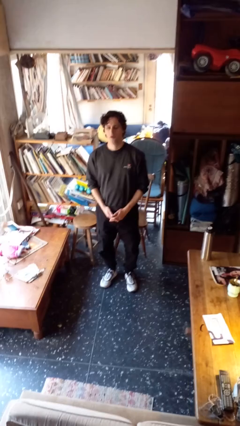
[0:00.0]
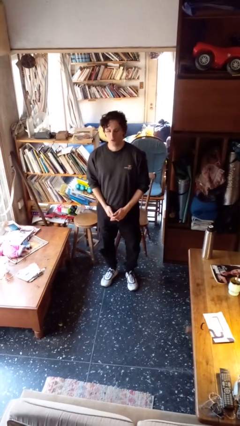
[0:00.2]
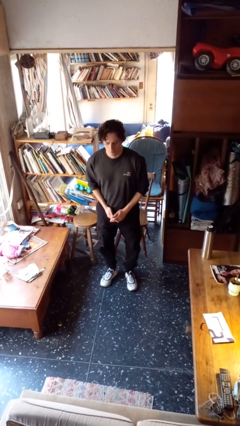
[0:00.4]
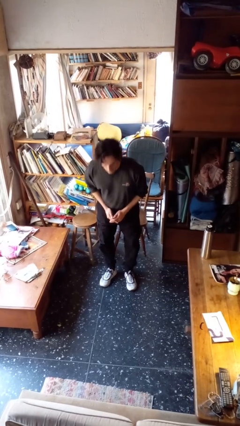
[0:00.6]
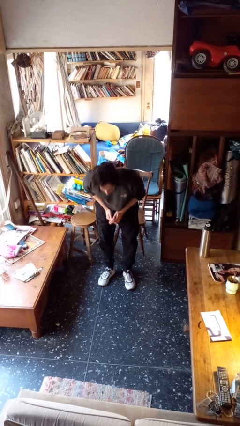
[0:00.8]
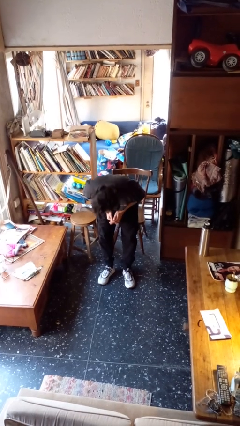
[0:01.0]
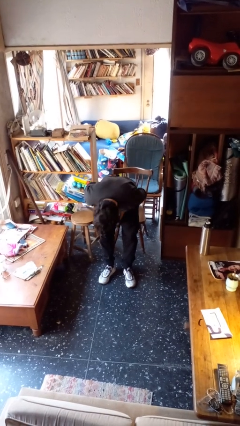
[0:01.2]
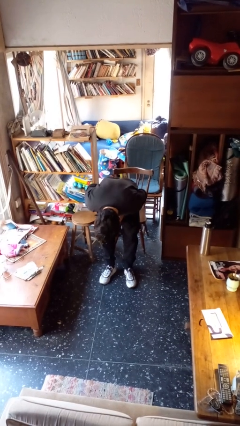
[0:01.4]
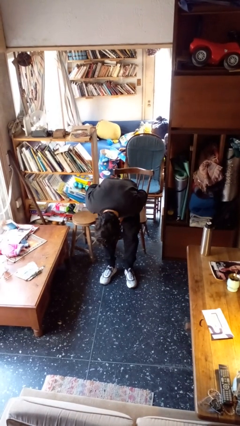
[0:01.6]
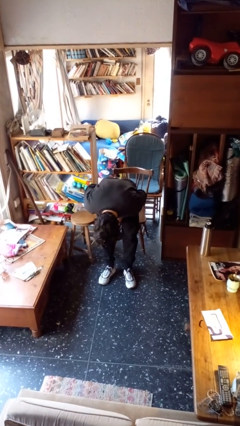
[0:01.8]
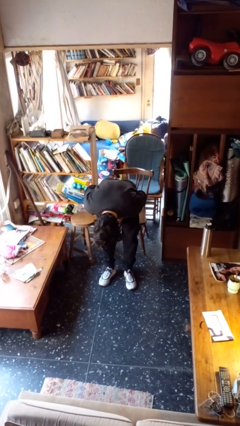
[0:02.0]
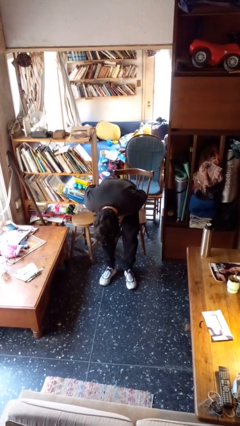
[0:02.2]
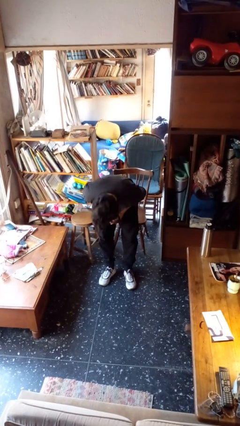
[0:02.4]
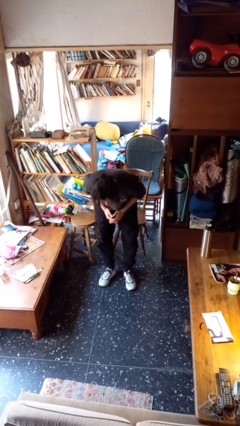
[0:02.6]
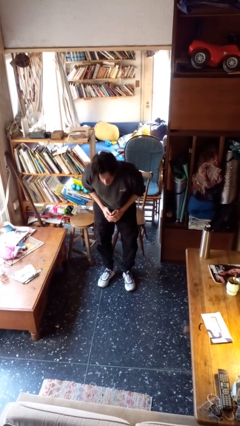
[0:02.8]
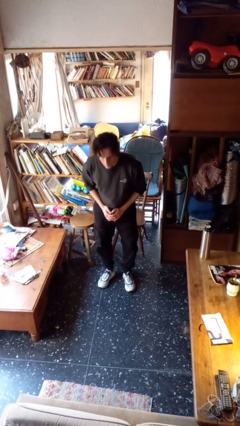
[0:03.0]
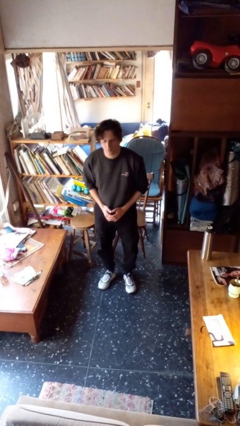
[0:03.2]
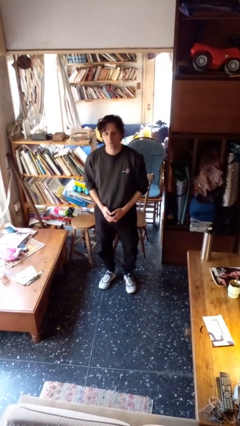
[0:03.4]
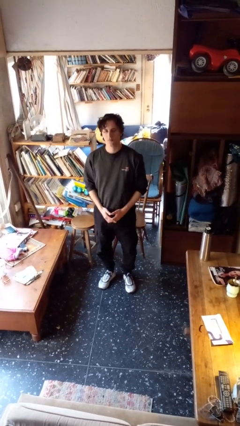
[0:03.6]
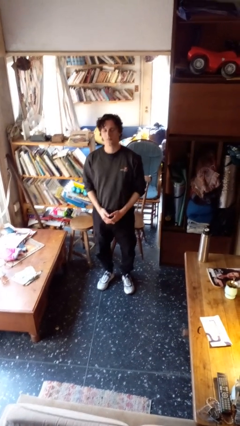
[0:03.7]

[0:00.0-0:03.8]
person bows

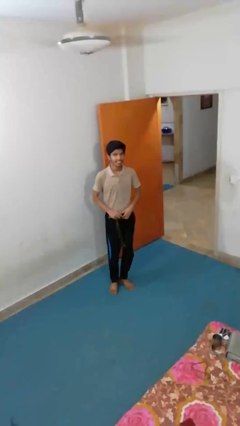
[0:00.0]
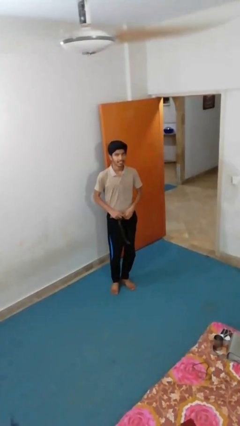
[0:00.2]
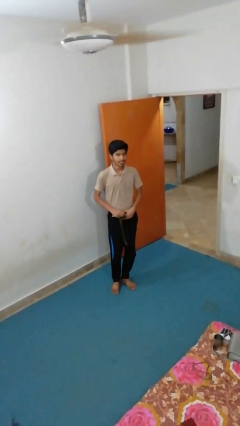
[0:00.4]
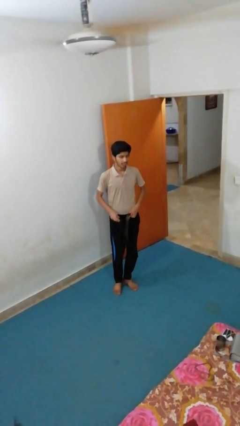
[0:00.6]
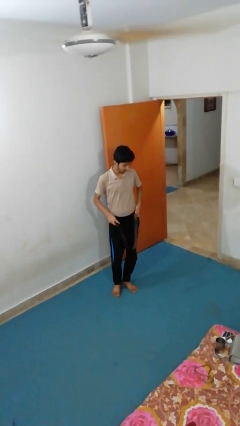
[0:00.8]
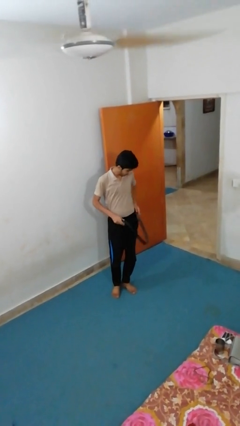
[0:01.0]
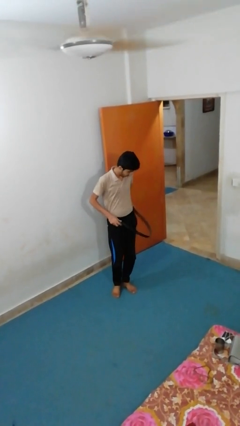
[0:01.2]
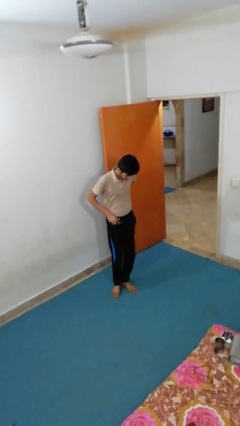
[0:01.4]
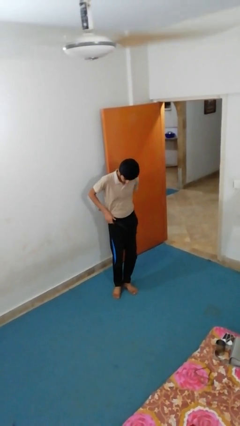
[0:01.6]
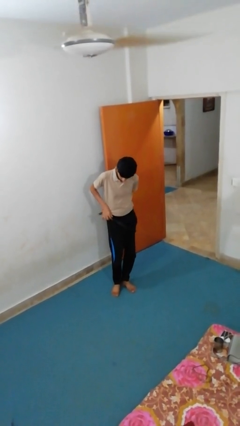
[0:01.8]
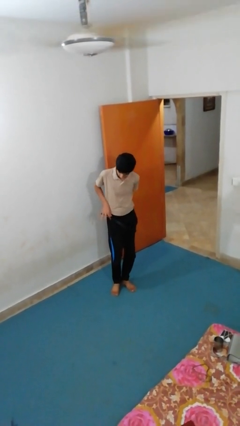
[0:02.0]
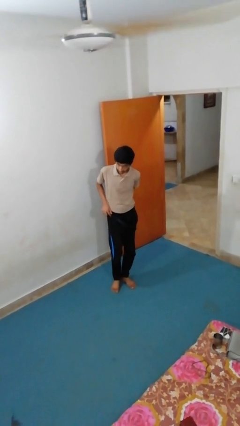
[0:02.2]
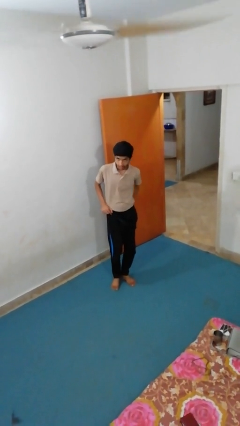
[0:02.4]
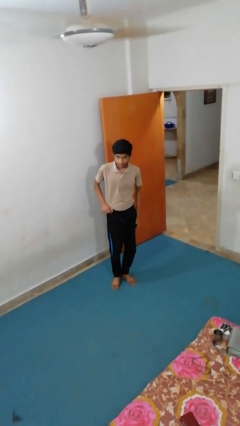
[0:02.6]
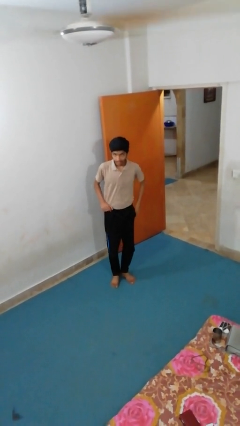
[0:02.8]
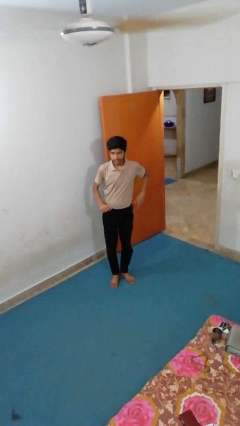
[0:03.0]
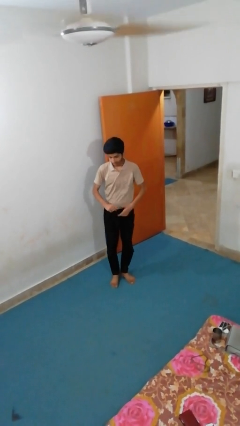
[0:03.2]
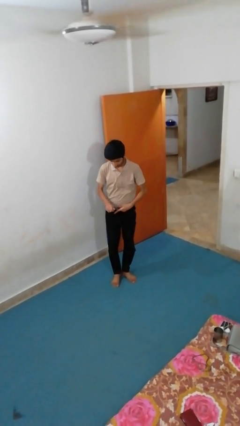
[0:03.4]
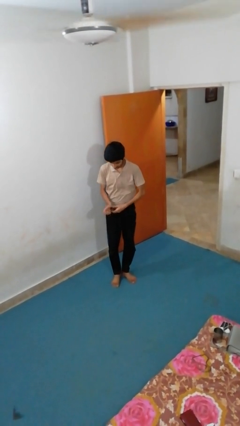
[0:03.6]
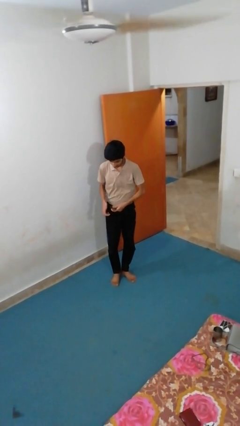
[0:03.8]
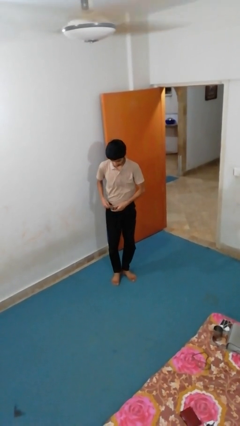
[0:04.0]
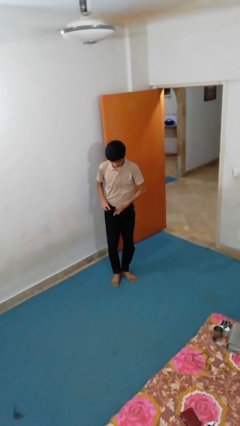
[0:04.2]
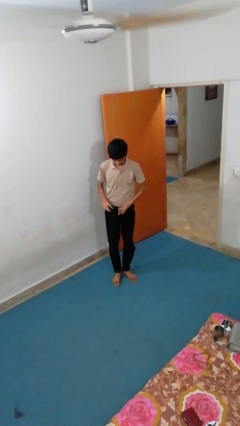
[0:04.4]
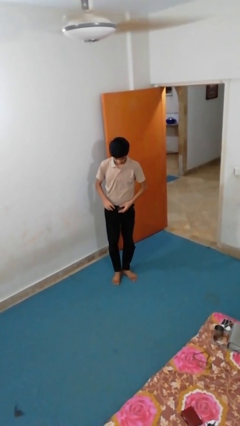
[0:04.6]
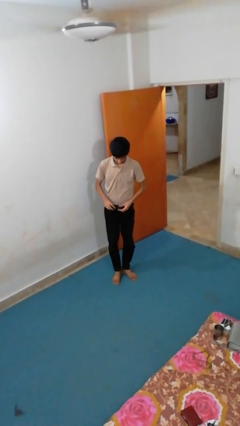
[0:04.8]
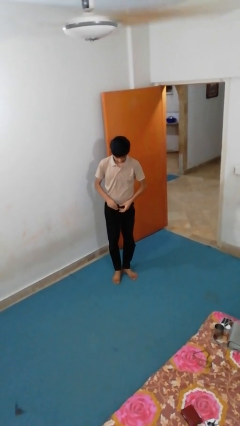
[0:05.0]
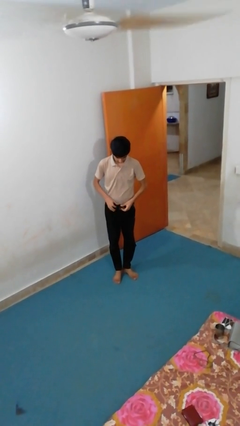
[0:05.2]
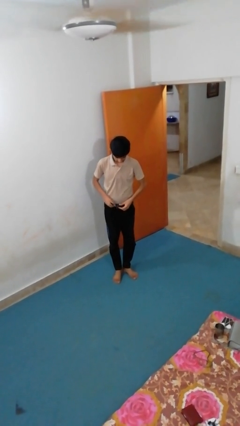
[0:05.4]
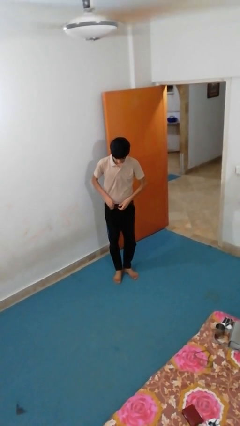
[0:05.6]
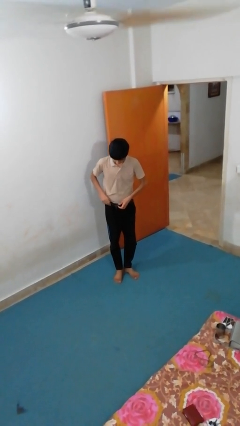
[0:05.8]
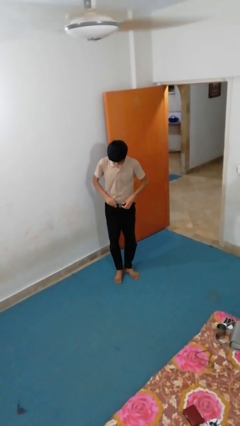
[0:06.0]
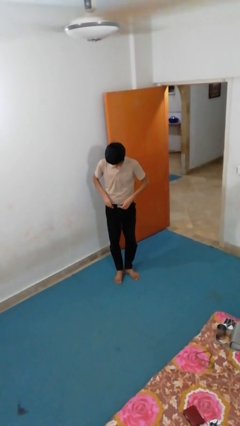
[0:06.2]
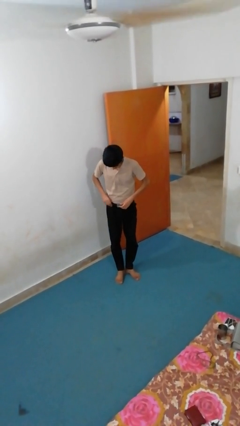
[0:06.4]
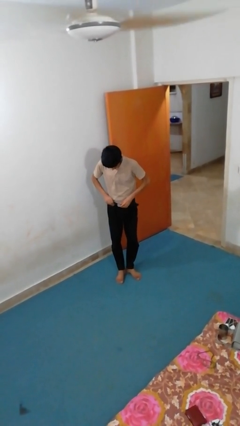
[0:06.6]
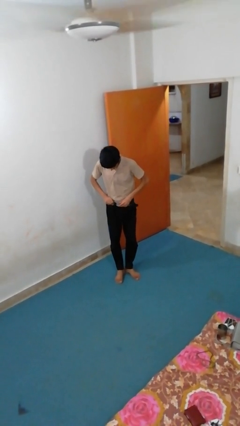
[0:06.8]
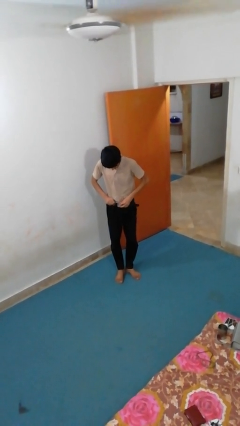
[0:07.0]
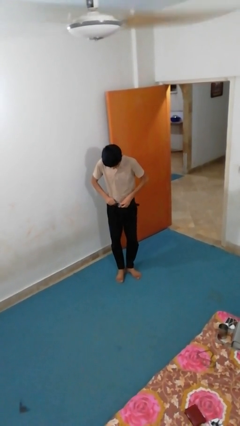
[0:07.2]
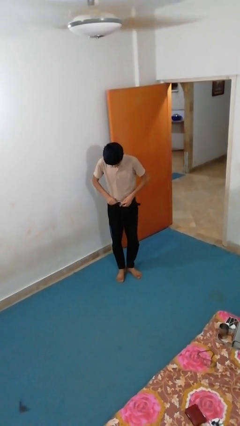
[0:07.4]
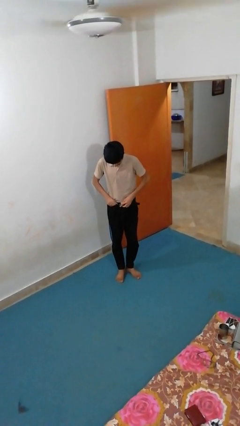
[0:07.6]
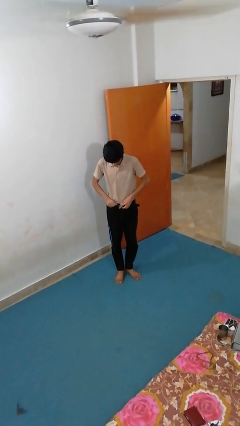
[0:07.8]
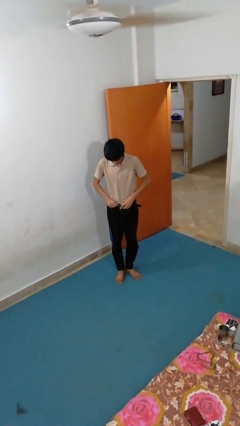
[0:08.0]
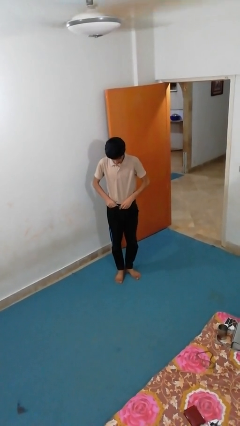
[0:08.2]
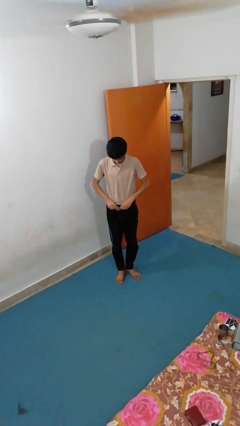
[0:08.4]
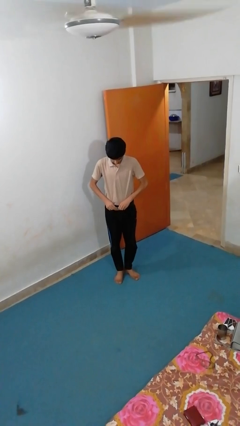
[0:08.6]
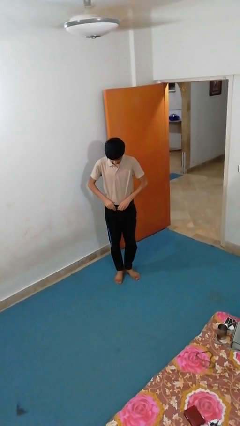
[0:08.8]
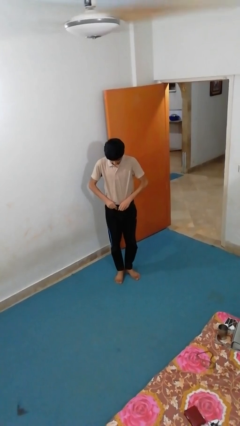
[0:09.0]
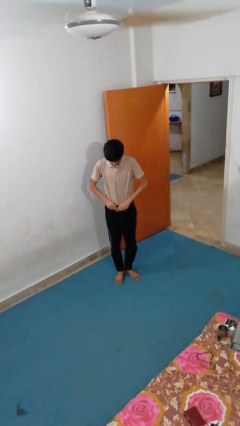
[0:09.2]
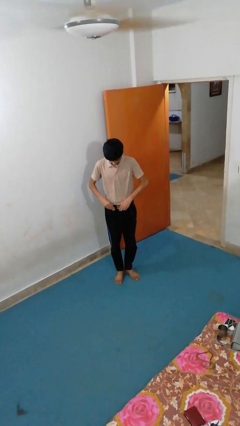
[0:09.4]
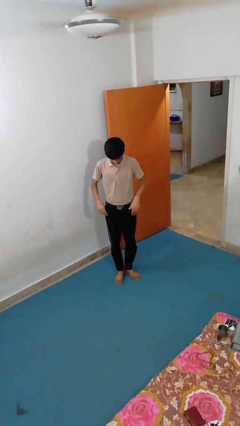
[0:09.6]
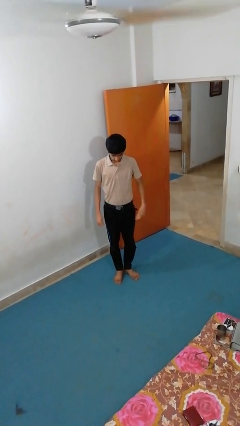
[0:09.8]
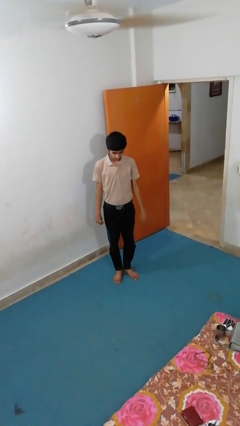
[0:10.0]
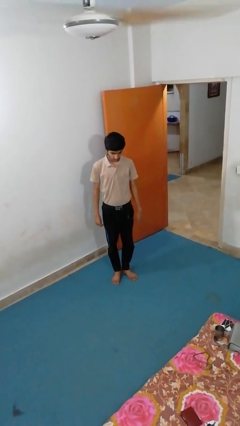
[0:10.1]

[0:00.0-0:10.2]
person puts on belt

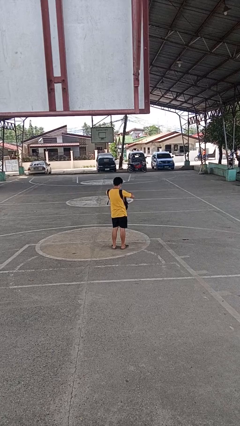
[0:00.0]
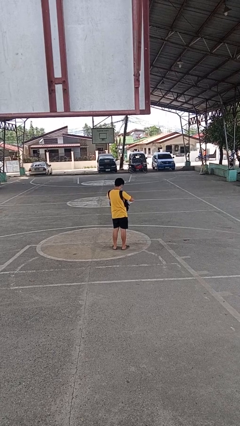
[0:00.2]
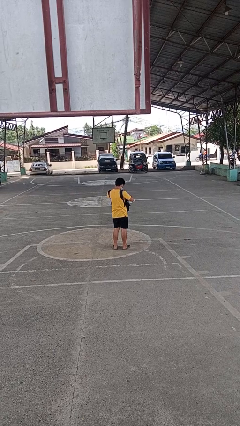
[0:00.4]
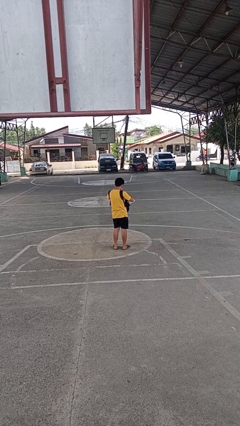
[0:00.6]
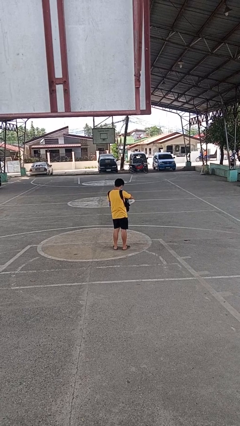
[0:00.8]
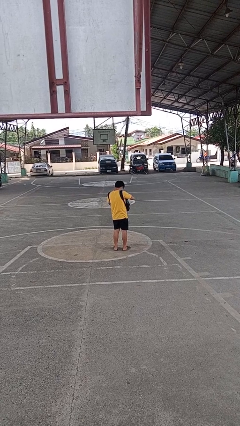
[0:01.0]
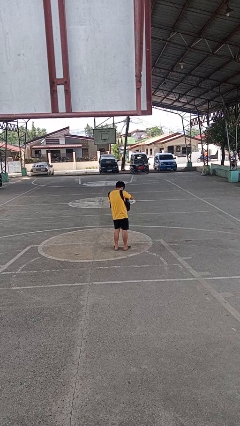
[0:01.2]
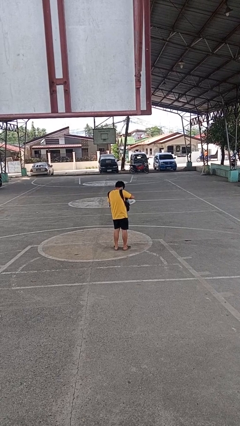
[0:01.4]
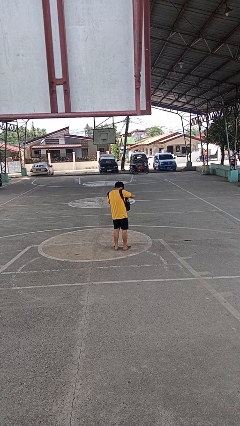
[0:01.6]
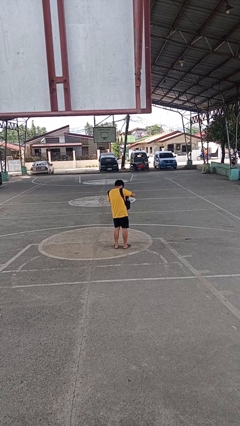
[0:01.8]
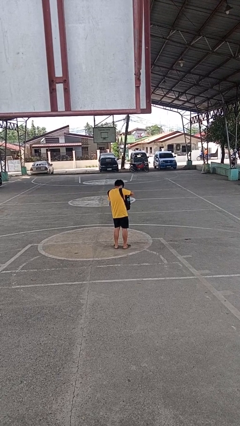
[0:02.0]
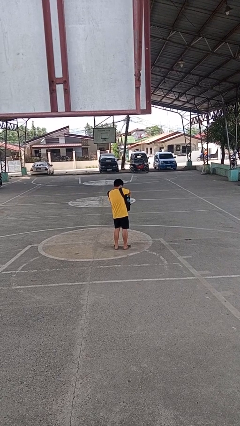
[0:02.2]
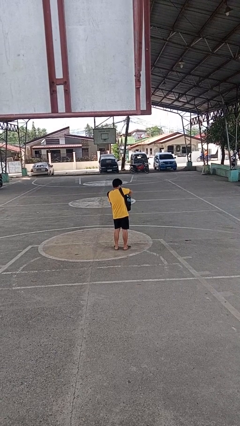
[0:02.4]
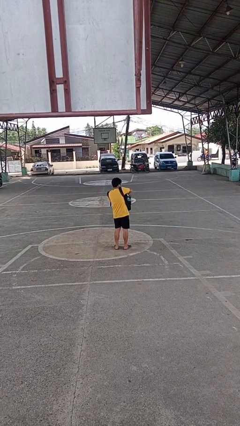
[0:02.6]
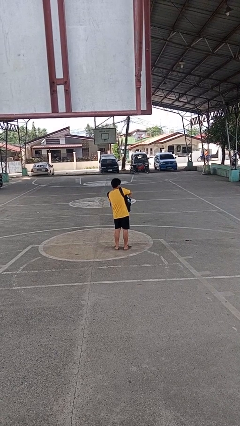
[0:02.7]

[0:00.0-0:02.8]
person searches in backpack

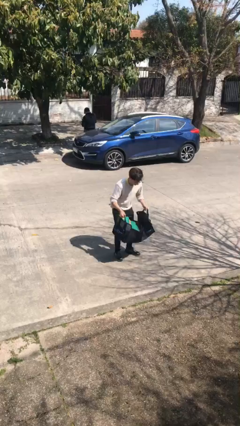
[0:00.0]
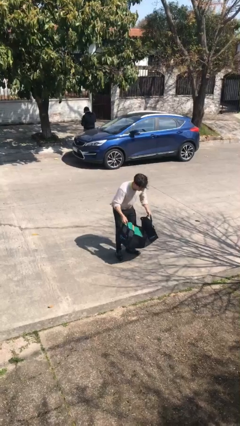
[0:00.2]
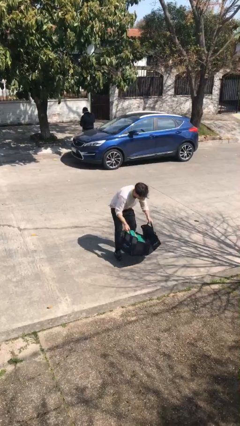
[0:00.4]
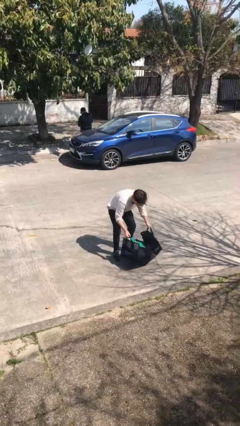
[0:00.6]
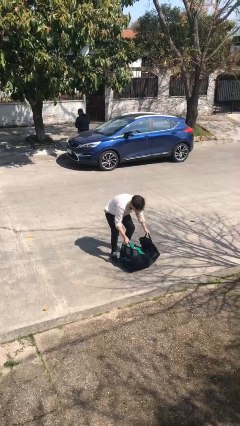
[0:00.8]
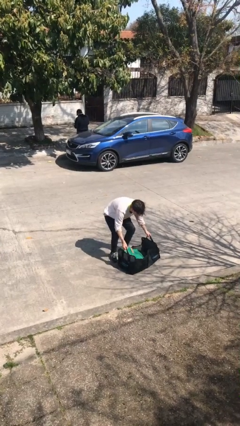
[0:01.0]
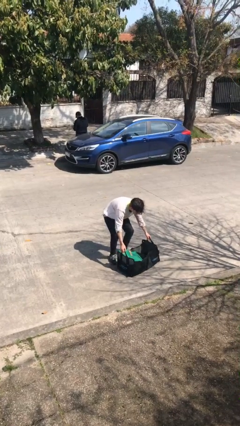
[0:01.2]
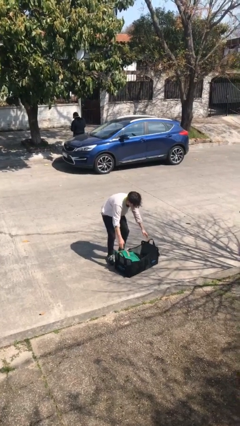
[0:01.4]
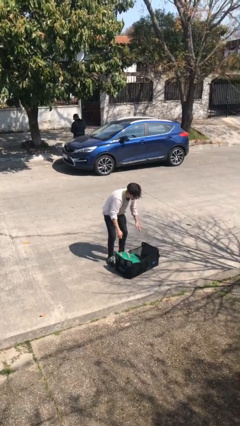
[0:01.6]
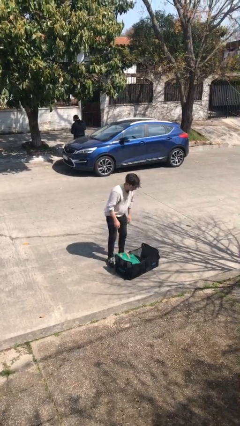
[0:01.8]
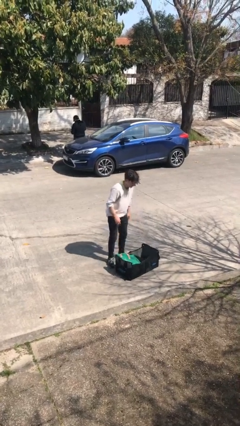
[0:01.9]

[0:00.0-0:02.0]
person puts down object on floor
